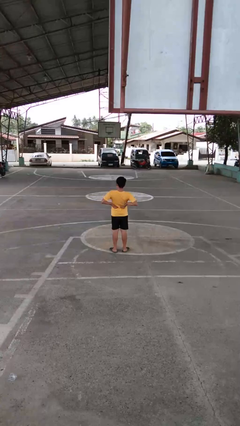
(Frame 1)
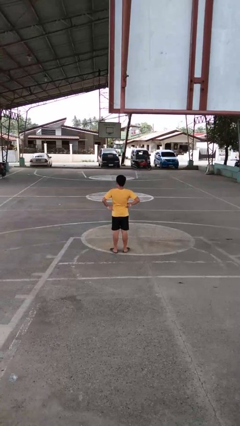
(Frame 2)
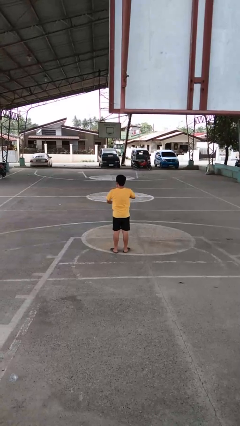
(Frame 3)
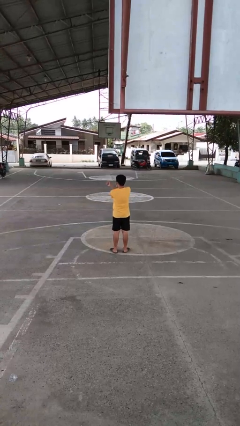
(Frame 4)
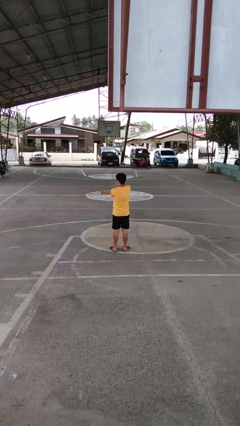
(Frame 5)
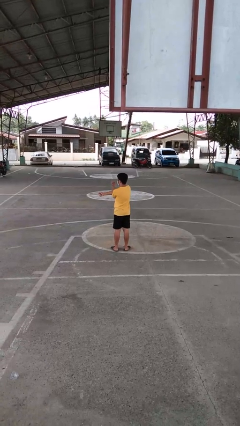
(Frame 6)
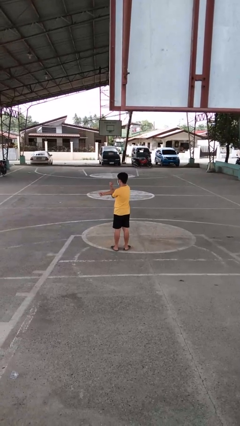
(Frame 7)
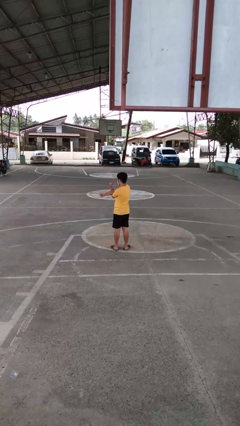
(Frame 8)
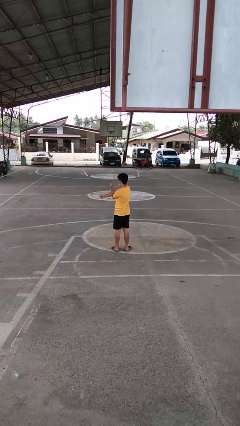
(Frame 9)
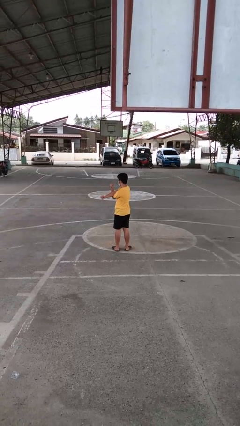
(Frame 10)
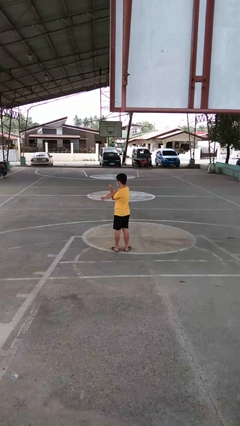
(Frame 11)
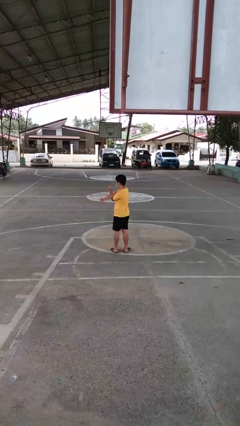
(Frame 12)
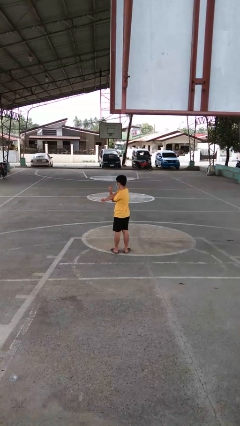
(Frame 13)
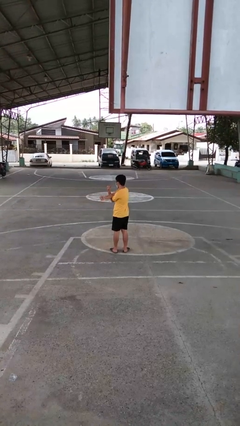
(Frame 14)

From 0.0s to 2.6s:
person stretches arms to side

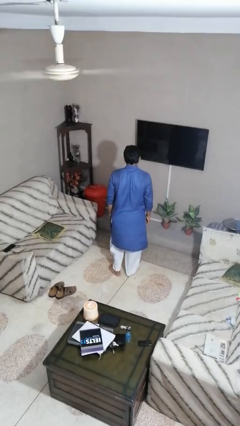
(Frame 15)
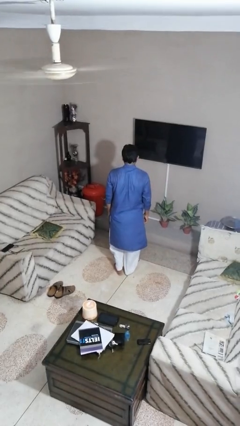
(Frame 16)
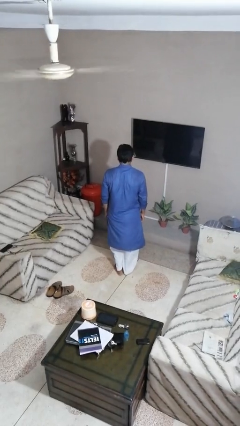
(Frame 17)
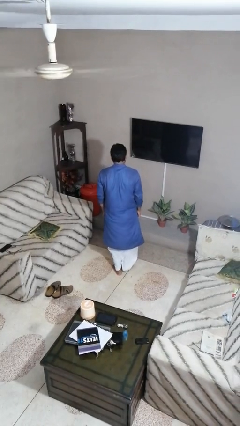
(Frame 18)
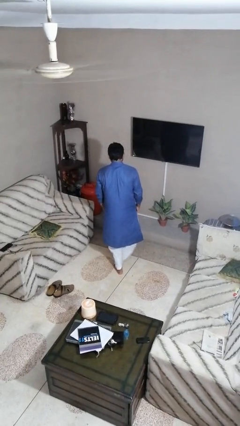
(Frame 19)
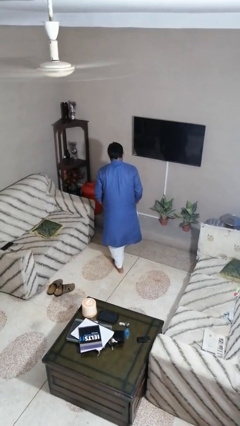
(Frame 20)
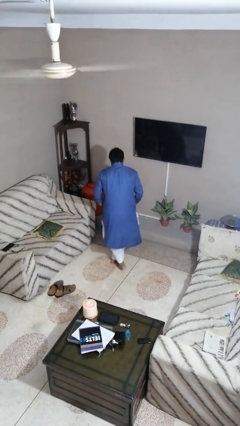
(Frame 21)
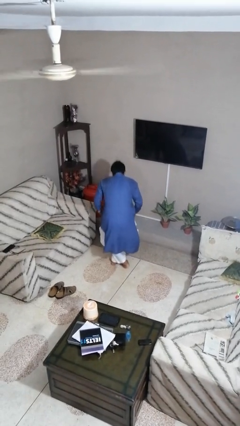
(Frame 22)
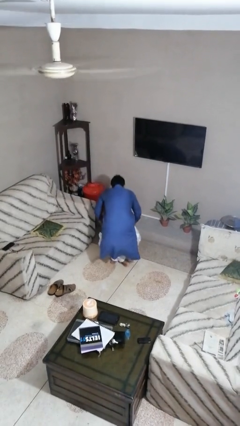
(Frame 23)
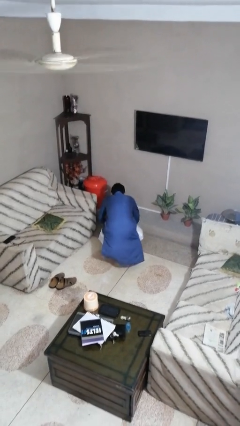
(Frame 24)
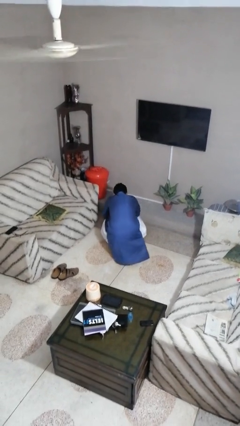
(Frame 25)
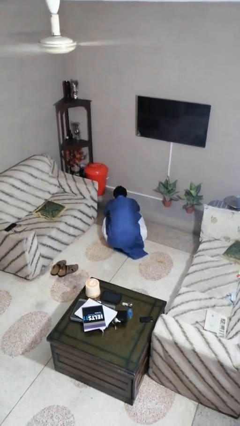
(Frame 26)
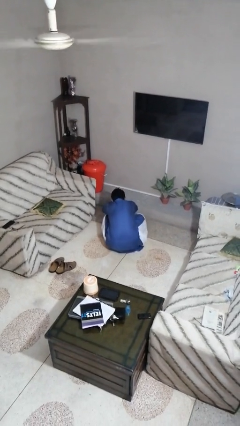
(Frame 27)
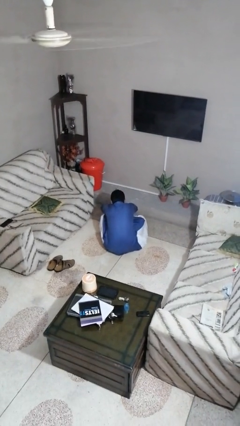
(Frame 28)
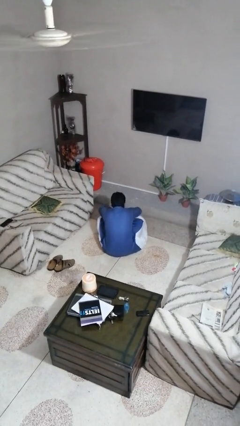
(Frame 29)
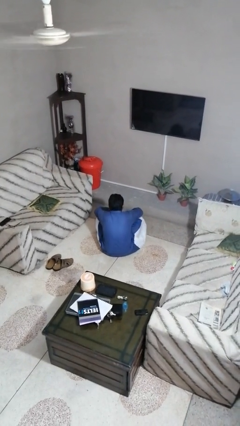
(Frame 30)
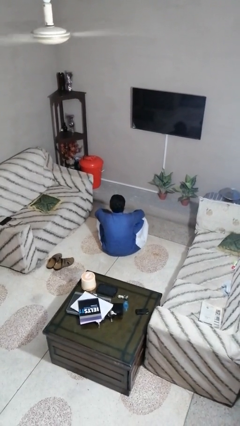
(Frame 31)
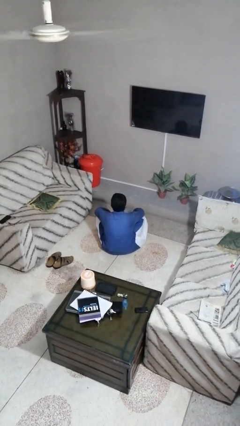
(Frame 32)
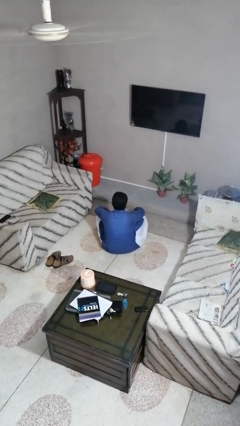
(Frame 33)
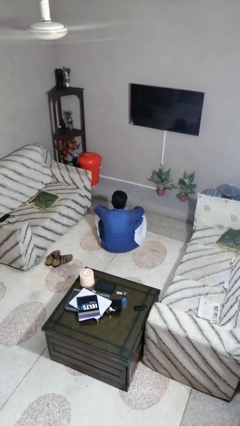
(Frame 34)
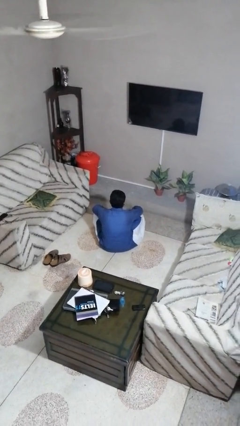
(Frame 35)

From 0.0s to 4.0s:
person sits crisscross

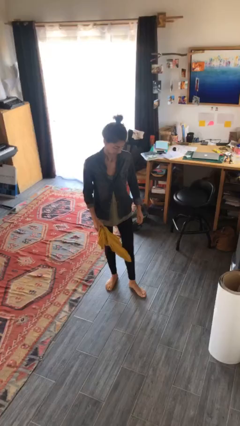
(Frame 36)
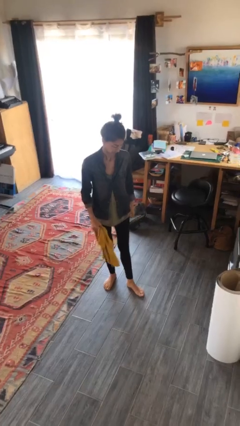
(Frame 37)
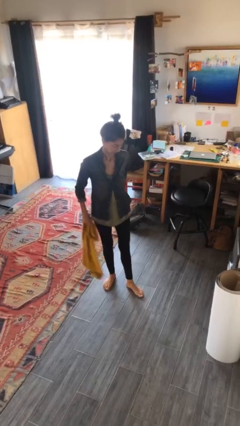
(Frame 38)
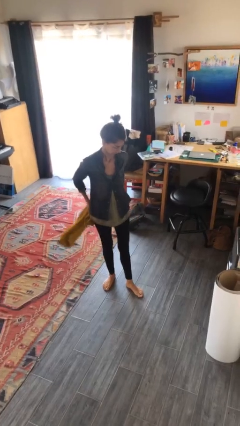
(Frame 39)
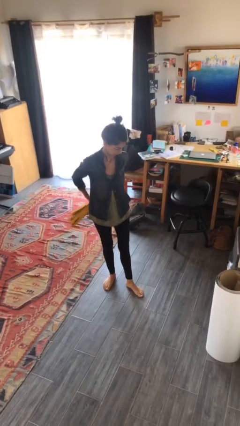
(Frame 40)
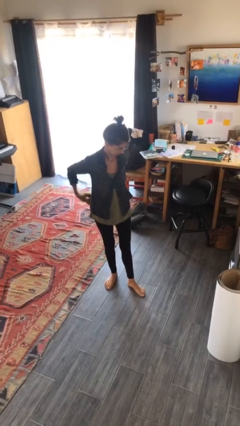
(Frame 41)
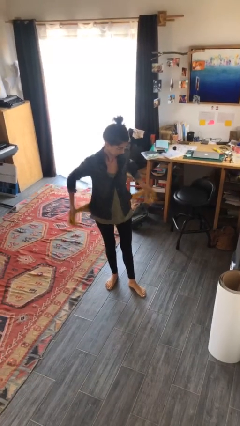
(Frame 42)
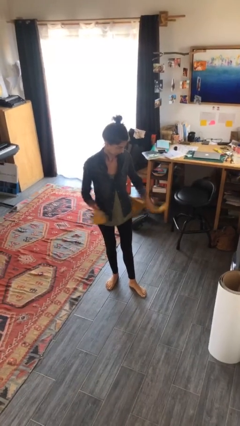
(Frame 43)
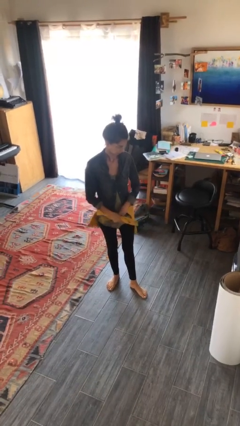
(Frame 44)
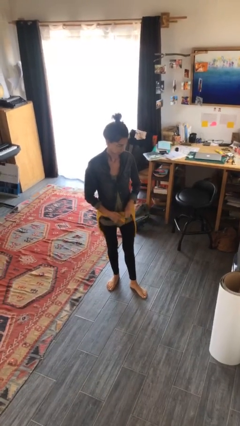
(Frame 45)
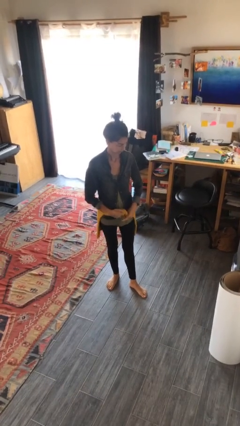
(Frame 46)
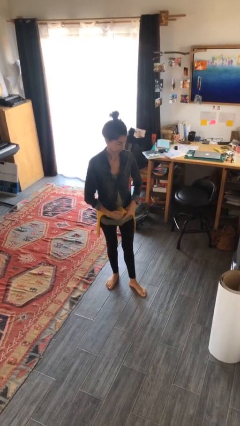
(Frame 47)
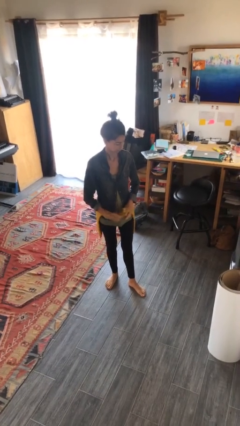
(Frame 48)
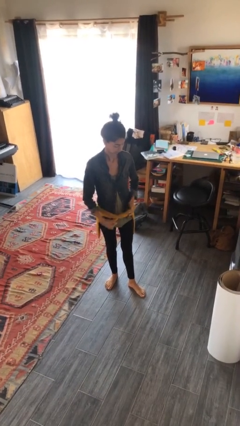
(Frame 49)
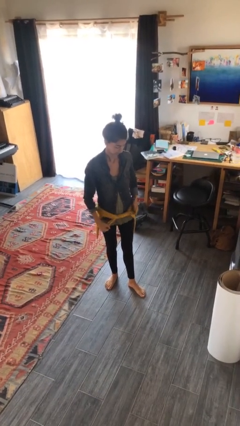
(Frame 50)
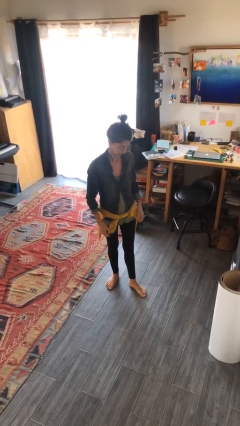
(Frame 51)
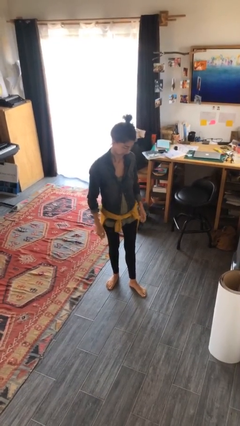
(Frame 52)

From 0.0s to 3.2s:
person ties jacket around waist

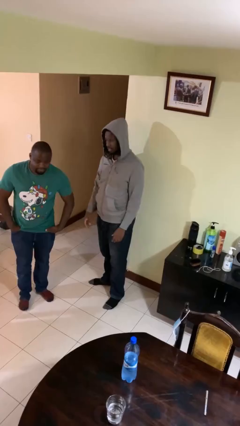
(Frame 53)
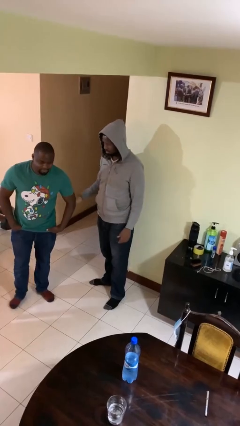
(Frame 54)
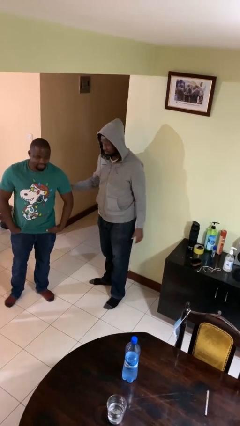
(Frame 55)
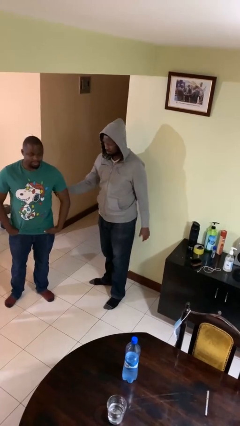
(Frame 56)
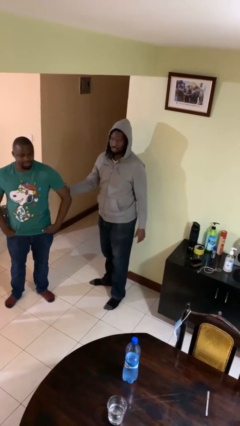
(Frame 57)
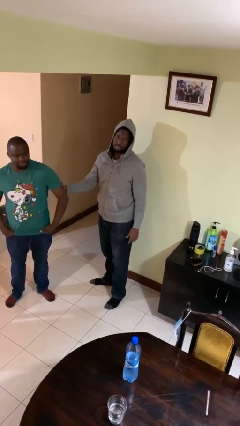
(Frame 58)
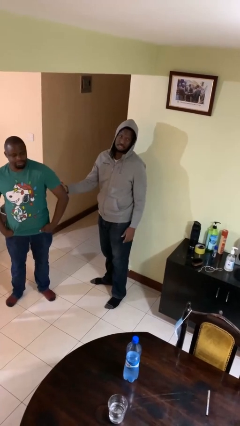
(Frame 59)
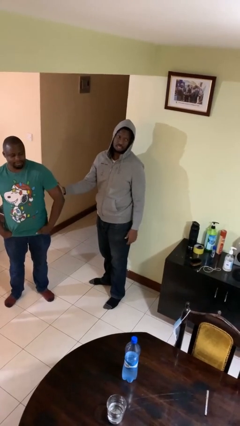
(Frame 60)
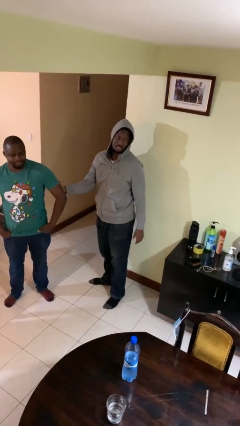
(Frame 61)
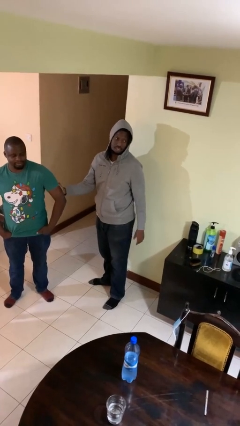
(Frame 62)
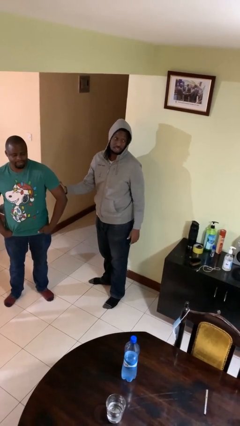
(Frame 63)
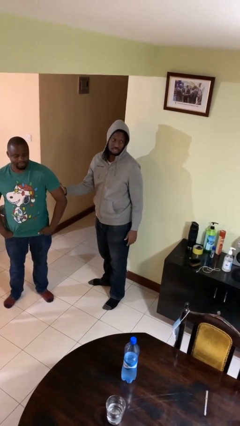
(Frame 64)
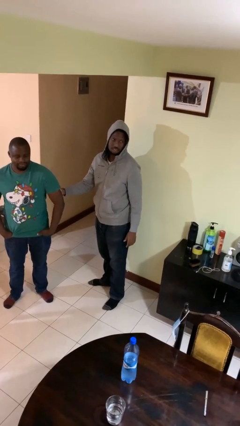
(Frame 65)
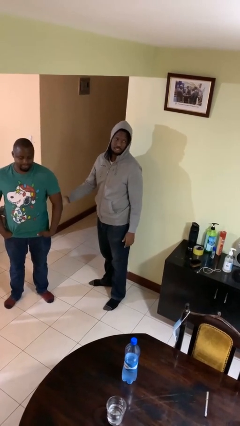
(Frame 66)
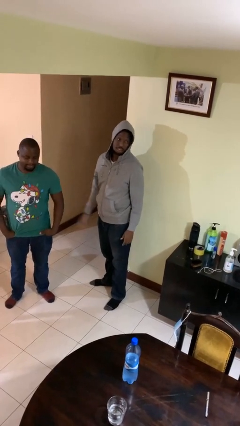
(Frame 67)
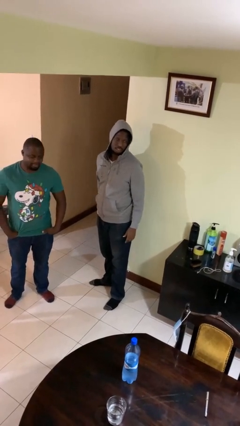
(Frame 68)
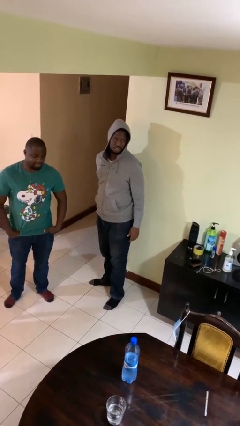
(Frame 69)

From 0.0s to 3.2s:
person grabs person by bicep

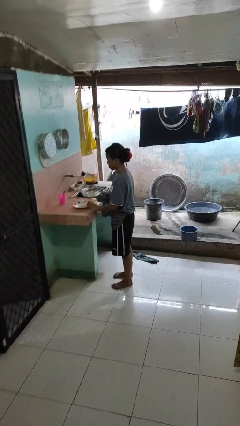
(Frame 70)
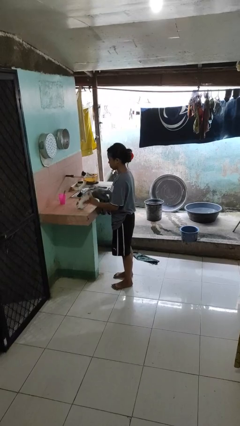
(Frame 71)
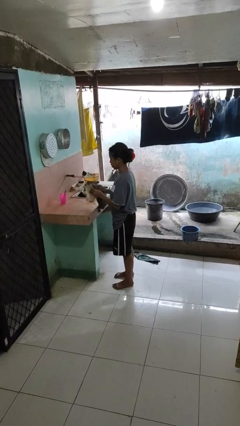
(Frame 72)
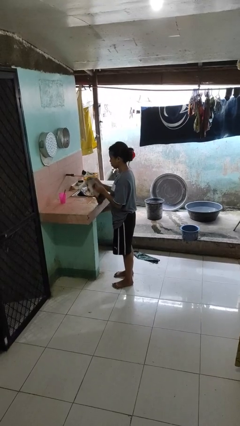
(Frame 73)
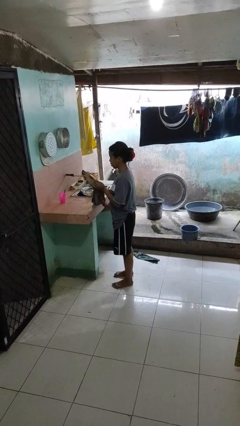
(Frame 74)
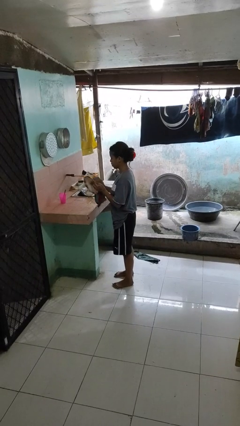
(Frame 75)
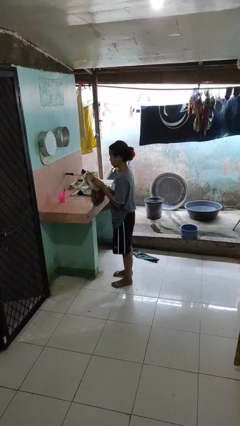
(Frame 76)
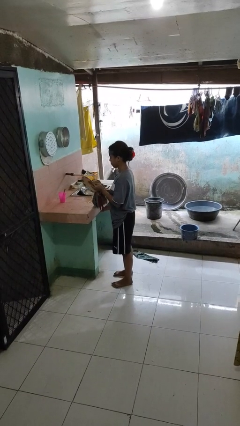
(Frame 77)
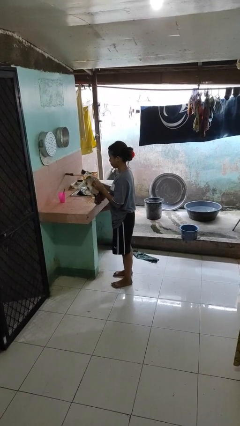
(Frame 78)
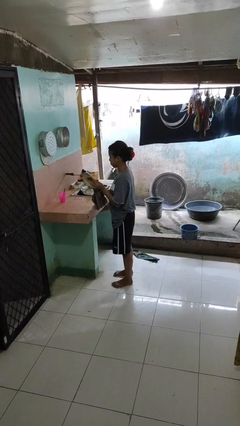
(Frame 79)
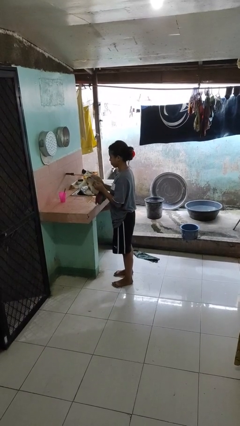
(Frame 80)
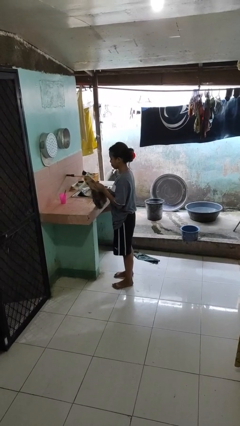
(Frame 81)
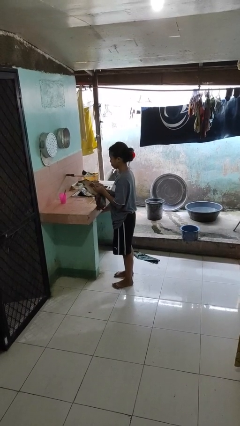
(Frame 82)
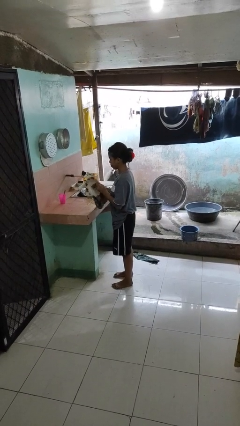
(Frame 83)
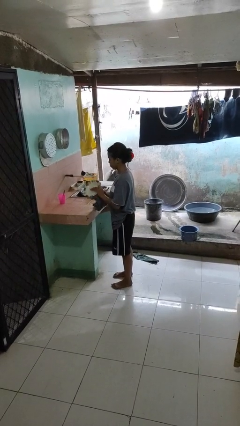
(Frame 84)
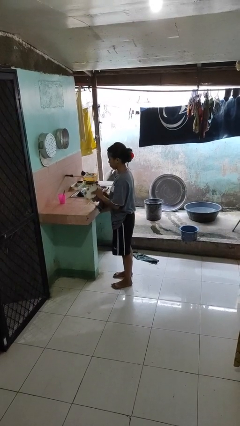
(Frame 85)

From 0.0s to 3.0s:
person dries dish

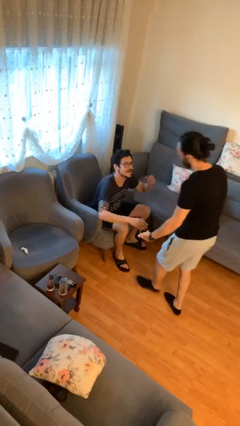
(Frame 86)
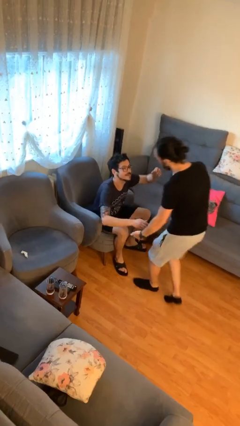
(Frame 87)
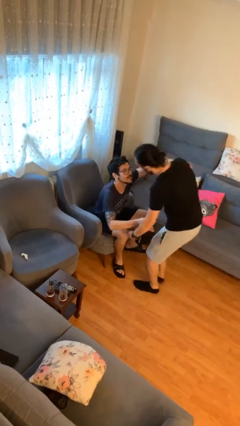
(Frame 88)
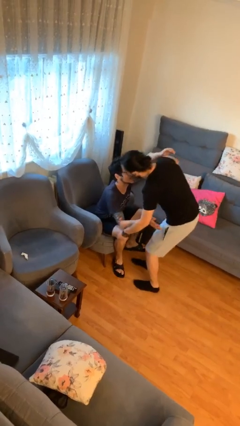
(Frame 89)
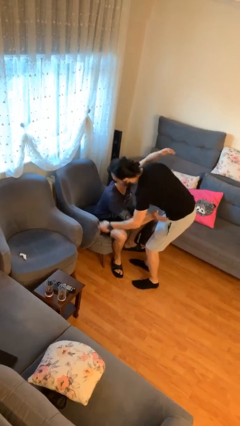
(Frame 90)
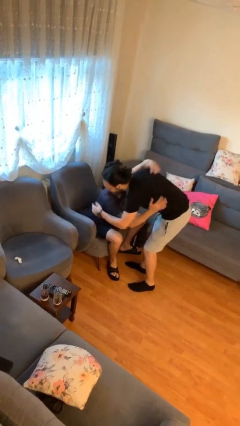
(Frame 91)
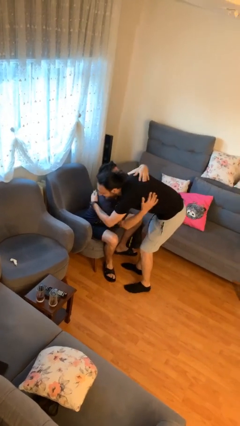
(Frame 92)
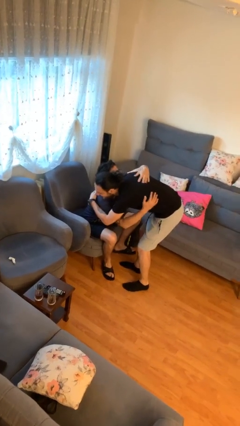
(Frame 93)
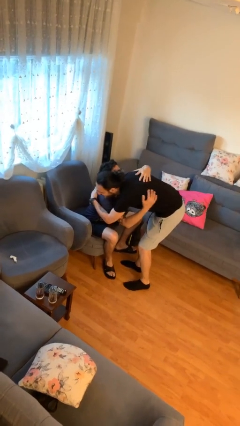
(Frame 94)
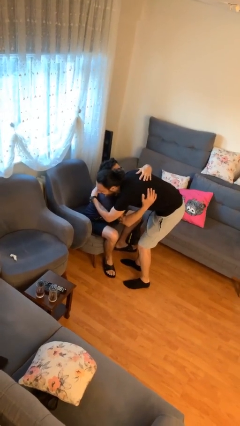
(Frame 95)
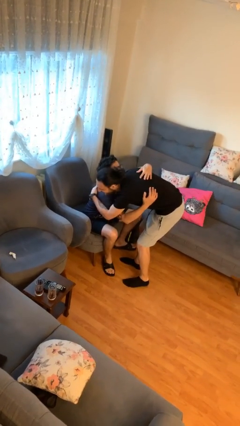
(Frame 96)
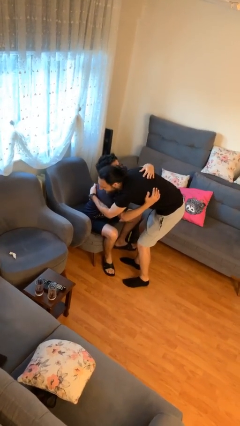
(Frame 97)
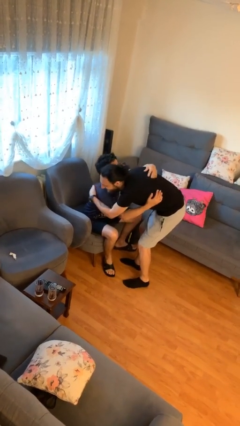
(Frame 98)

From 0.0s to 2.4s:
person embraces person
